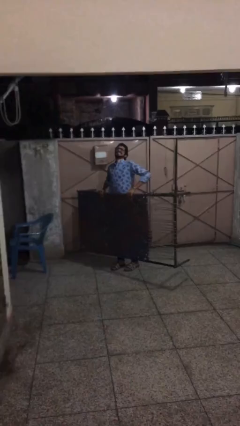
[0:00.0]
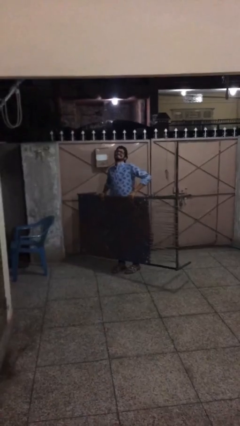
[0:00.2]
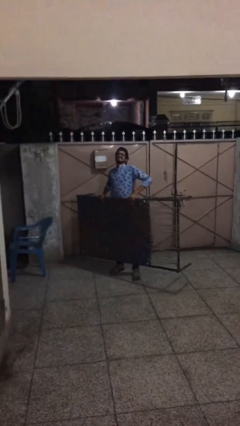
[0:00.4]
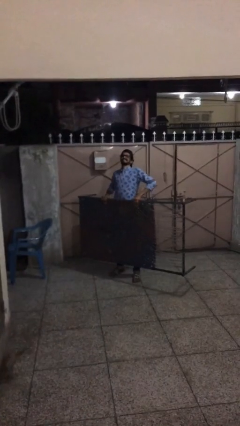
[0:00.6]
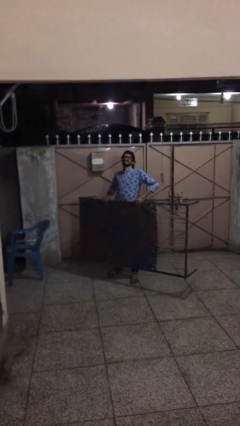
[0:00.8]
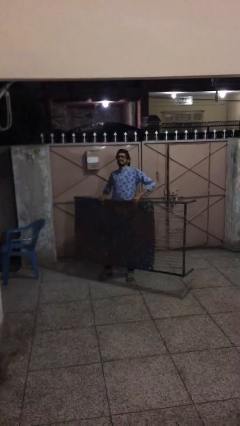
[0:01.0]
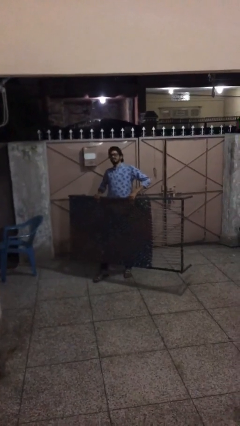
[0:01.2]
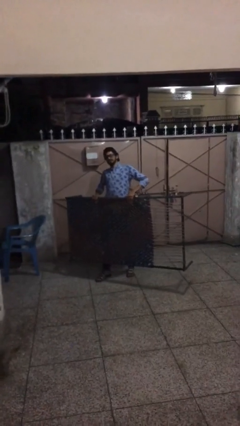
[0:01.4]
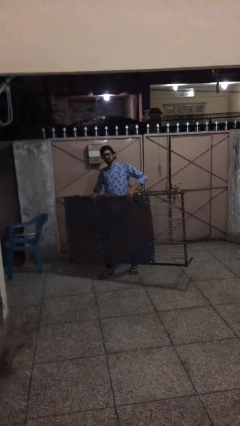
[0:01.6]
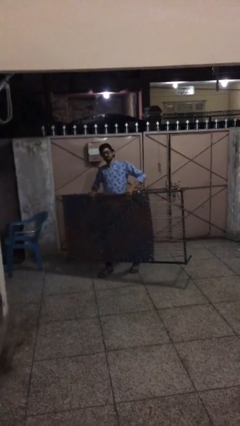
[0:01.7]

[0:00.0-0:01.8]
person carries heavy object

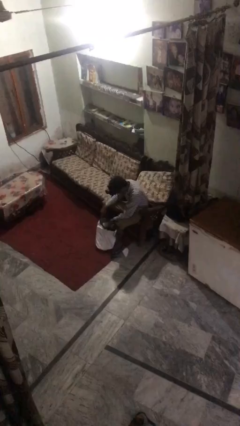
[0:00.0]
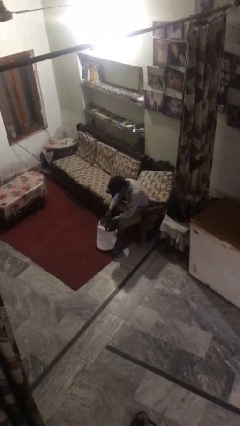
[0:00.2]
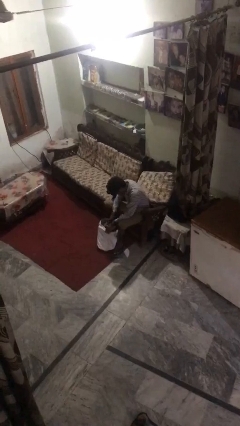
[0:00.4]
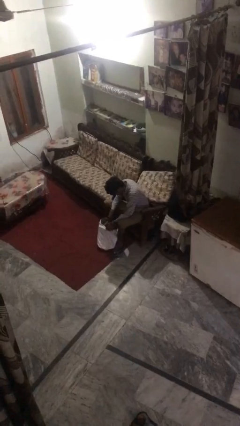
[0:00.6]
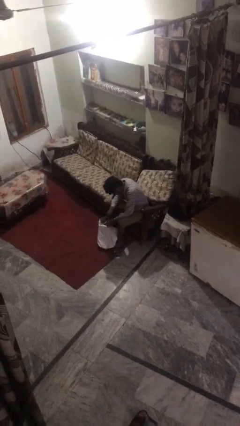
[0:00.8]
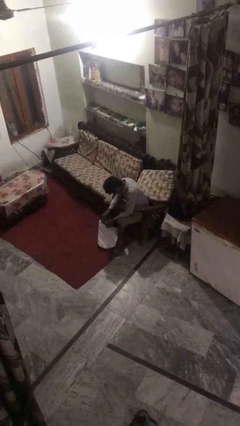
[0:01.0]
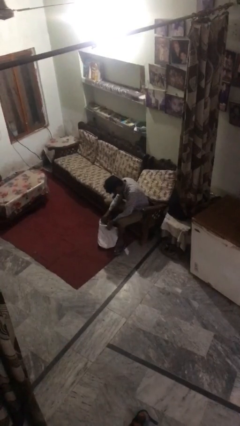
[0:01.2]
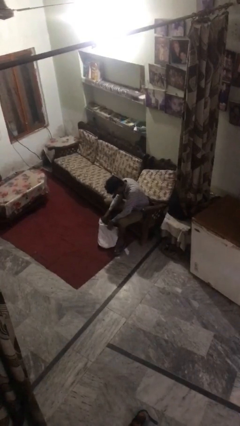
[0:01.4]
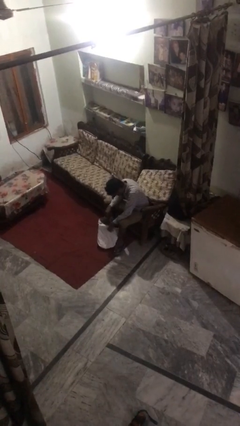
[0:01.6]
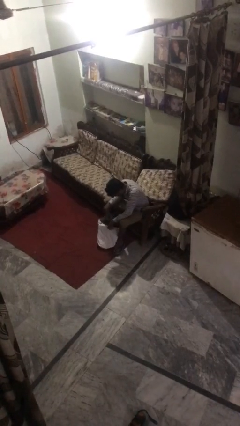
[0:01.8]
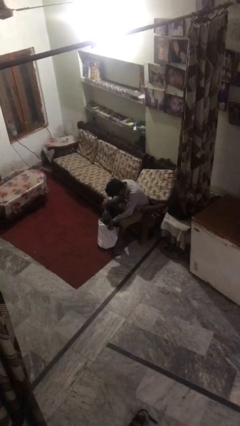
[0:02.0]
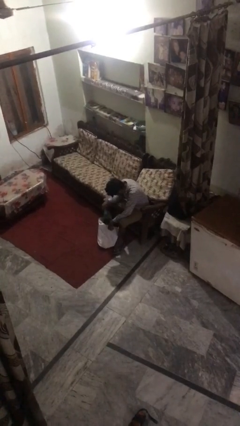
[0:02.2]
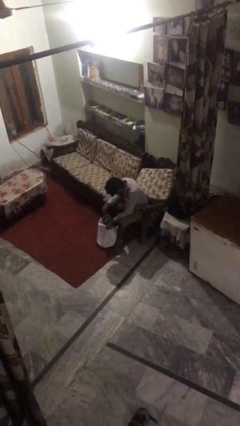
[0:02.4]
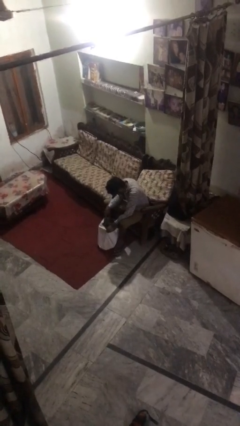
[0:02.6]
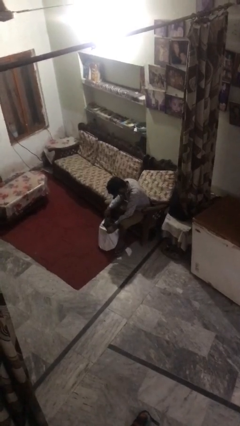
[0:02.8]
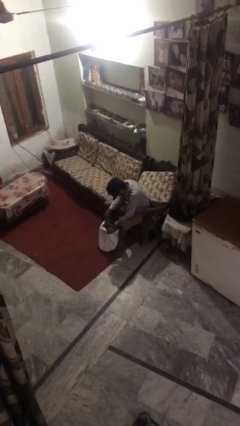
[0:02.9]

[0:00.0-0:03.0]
person searches under bed

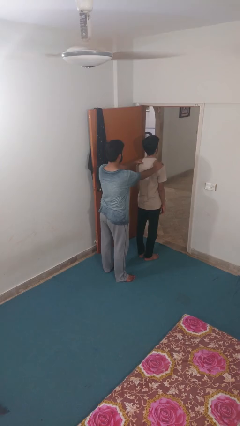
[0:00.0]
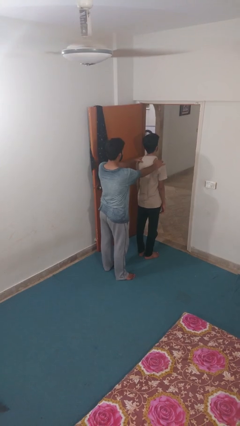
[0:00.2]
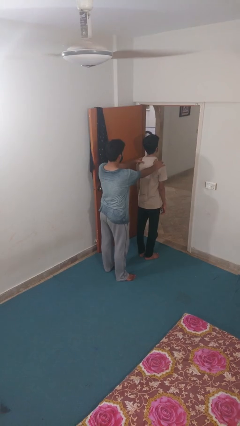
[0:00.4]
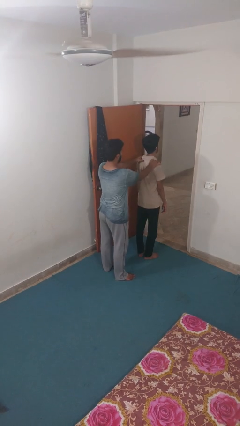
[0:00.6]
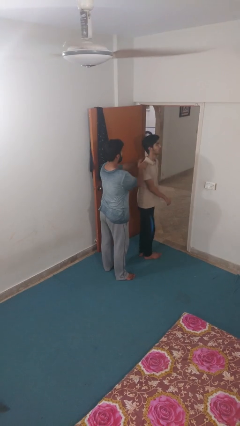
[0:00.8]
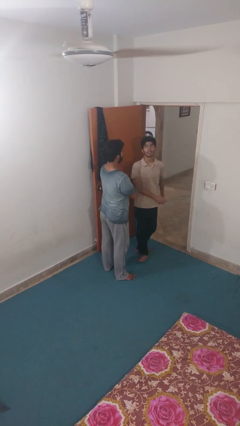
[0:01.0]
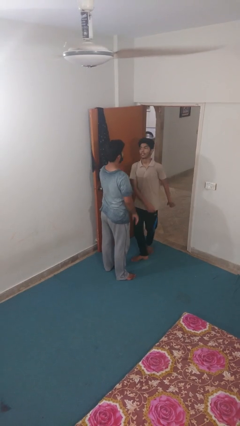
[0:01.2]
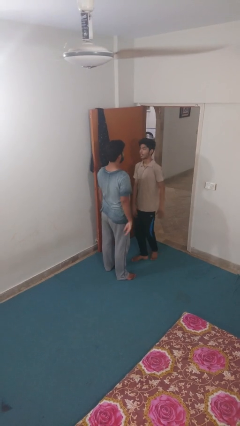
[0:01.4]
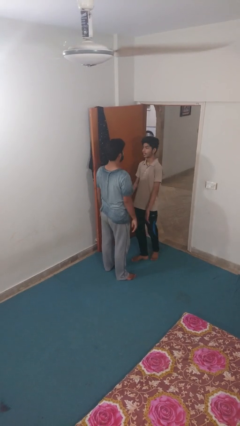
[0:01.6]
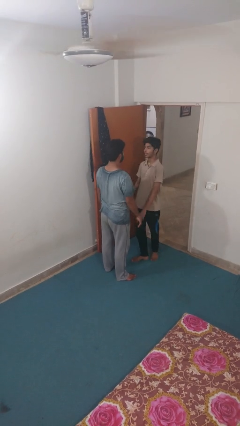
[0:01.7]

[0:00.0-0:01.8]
person spins person around

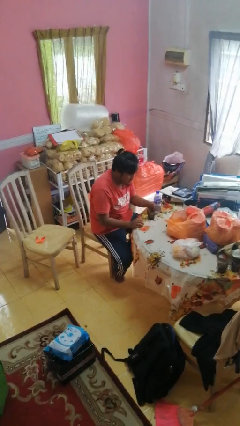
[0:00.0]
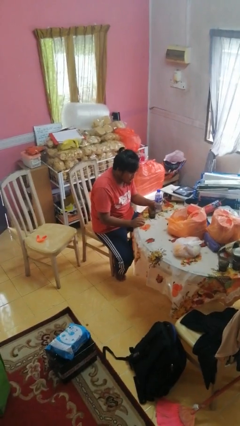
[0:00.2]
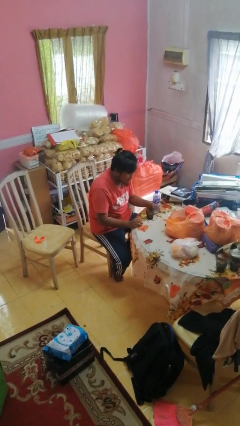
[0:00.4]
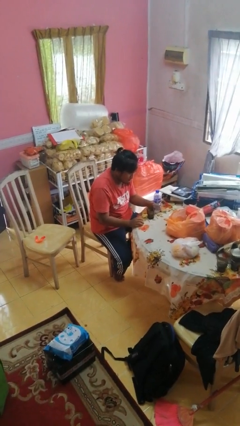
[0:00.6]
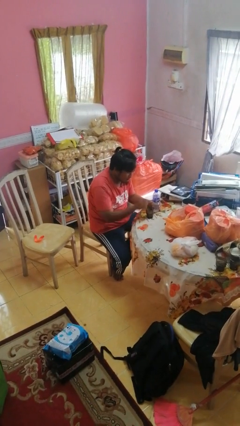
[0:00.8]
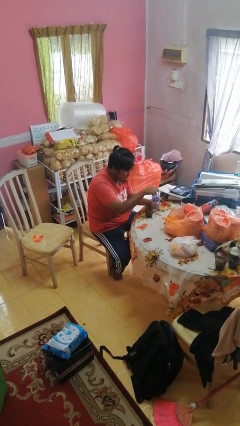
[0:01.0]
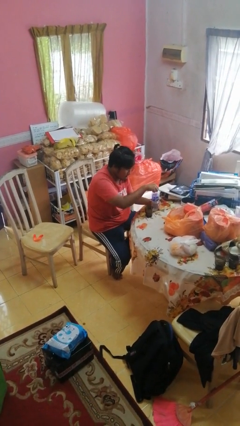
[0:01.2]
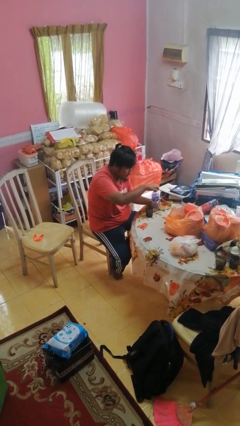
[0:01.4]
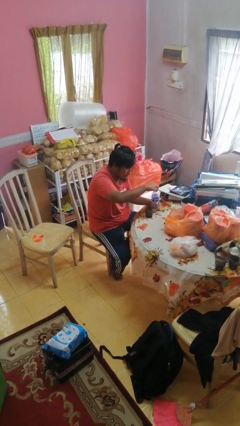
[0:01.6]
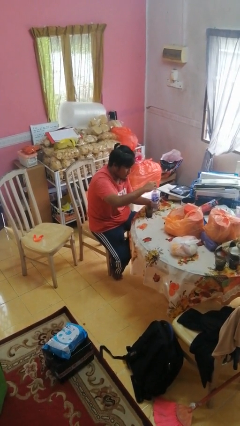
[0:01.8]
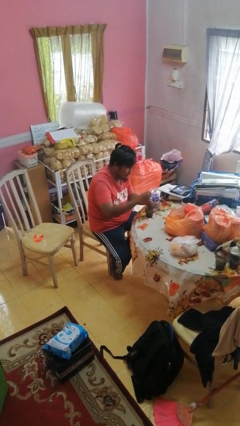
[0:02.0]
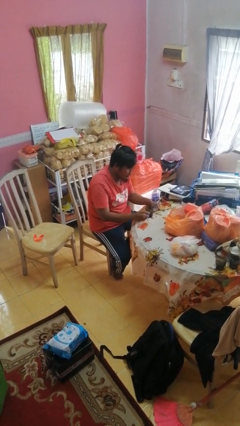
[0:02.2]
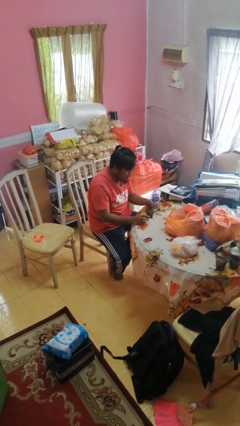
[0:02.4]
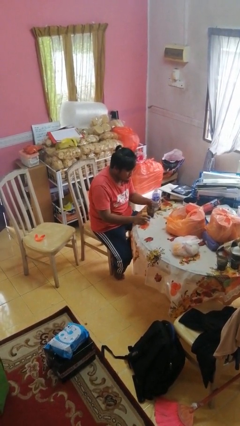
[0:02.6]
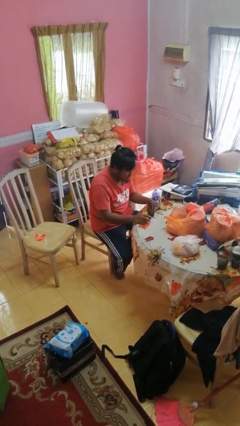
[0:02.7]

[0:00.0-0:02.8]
person unscrews lid from bottle

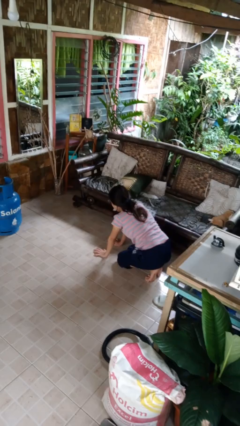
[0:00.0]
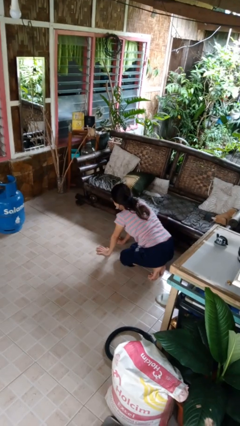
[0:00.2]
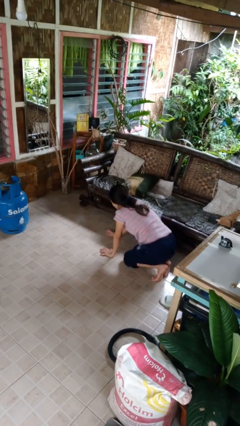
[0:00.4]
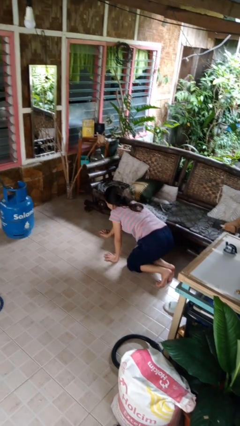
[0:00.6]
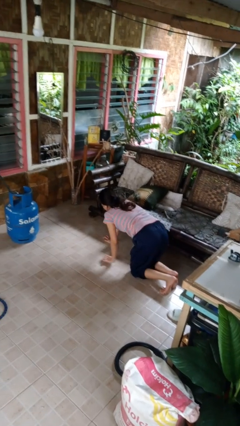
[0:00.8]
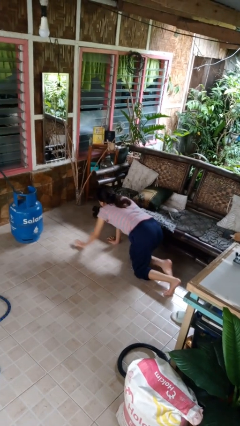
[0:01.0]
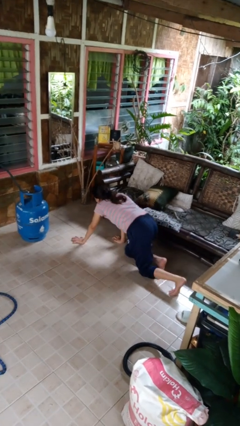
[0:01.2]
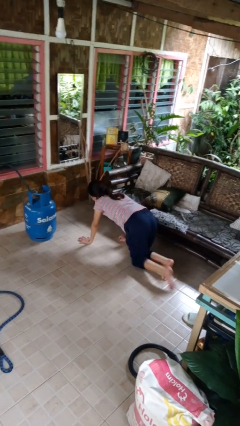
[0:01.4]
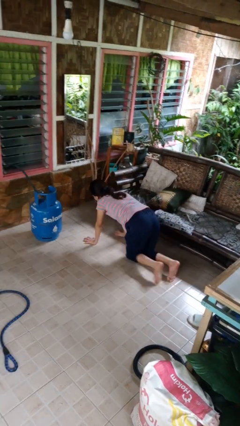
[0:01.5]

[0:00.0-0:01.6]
person crawls

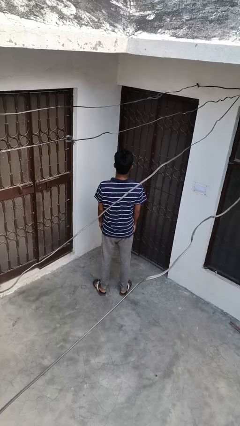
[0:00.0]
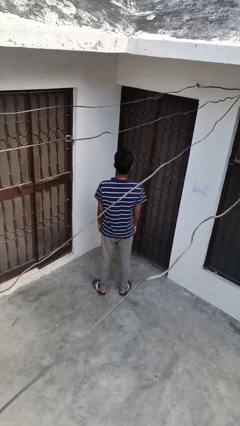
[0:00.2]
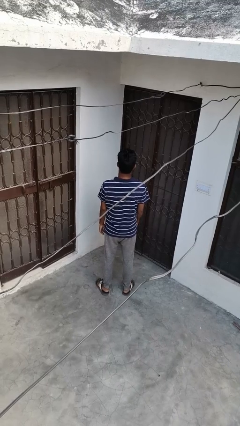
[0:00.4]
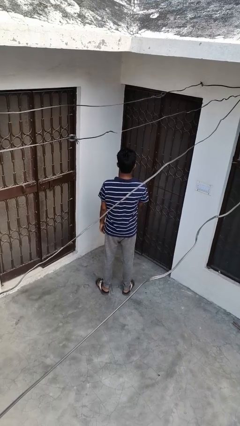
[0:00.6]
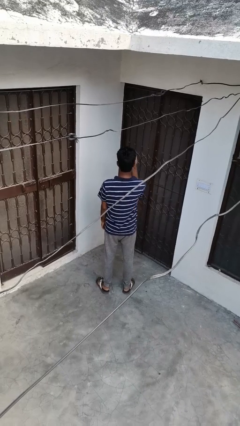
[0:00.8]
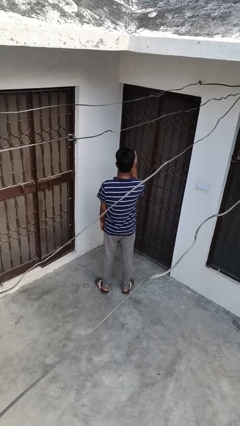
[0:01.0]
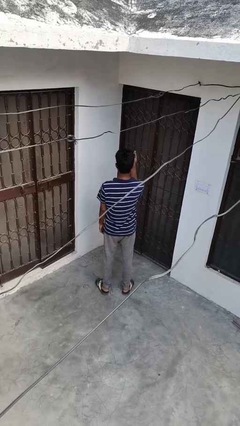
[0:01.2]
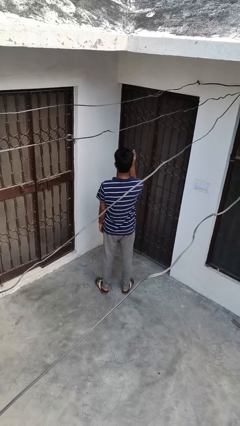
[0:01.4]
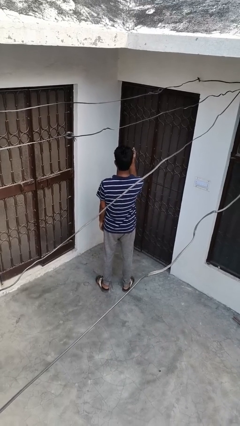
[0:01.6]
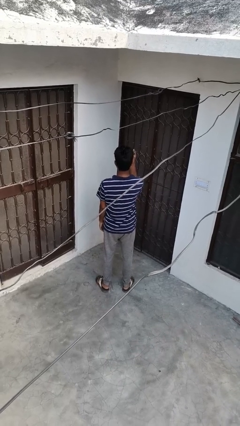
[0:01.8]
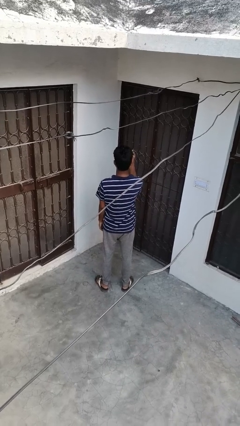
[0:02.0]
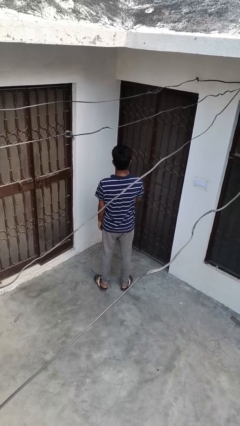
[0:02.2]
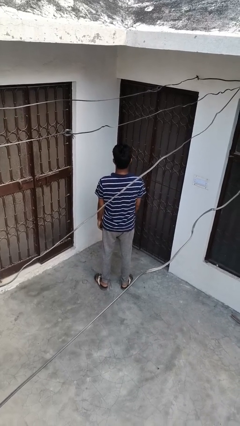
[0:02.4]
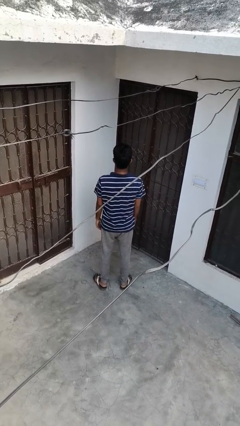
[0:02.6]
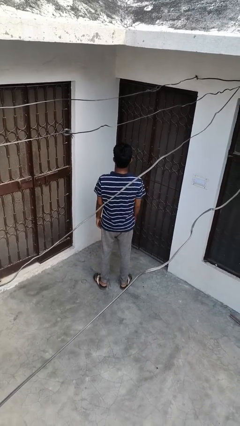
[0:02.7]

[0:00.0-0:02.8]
person gestures number four

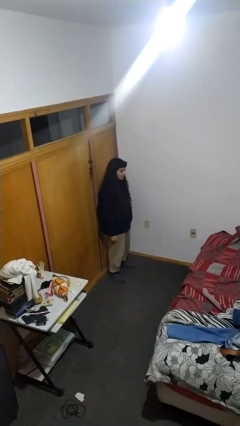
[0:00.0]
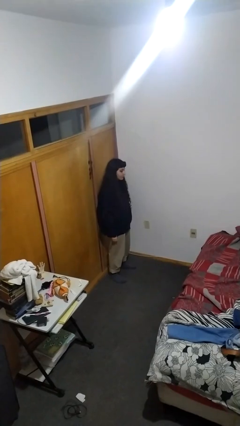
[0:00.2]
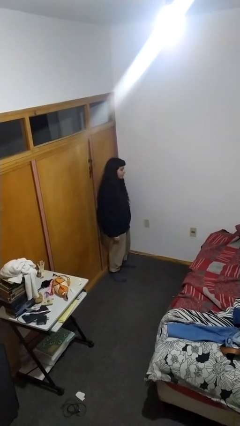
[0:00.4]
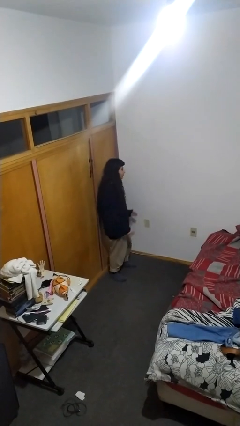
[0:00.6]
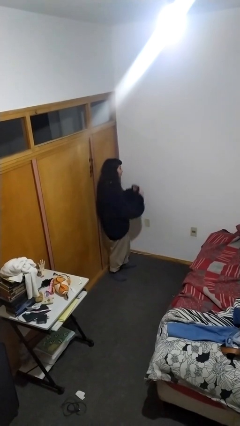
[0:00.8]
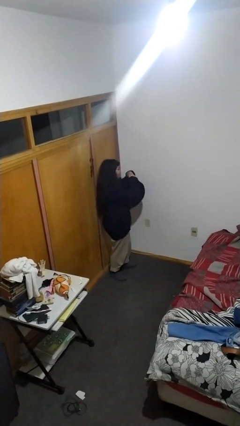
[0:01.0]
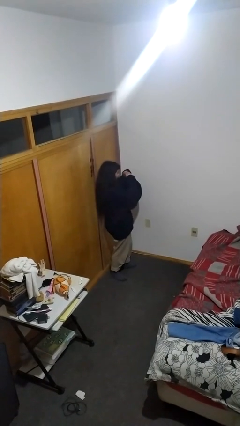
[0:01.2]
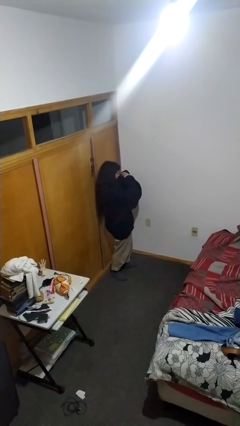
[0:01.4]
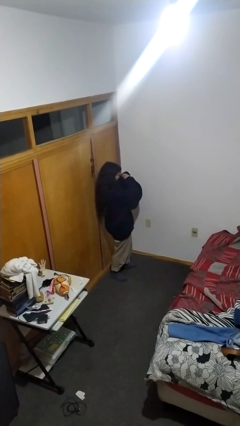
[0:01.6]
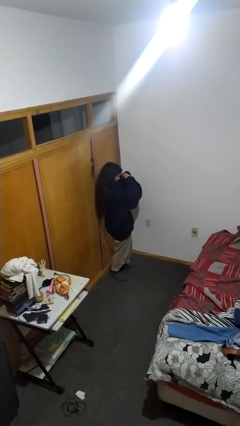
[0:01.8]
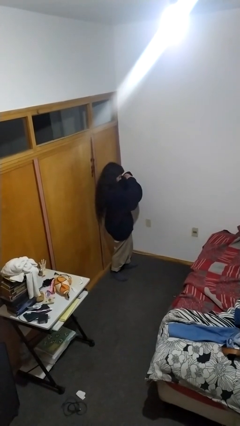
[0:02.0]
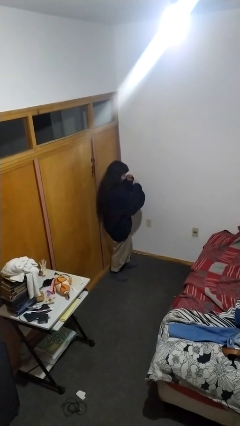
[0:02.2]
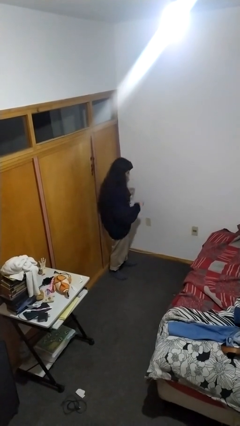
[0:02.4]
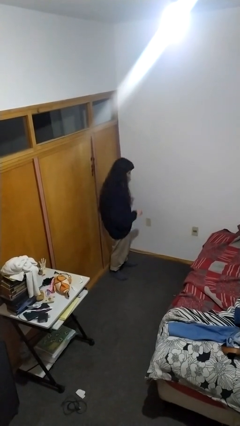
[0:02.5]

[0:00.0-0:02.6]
person gestures heart

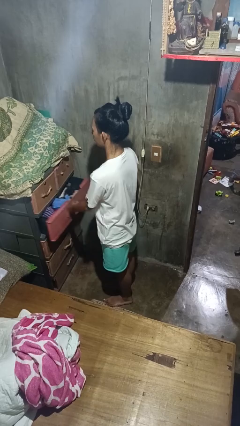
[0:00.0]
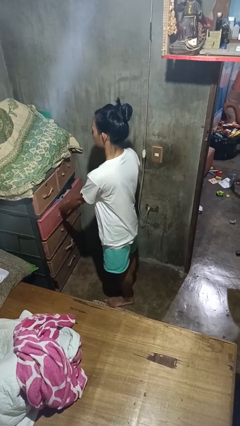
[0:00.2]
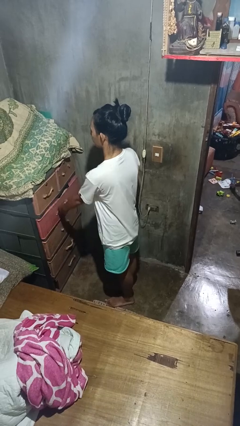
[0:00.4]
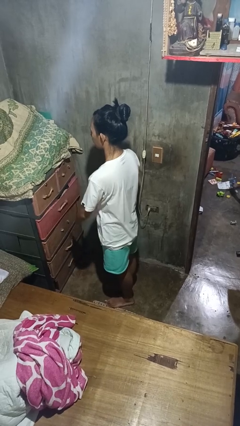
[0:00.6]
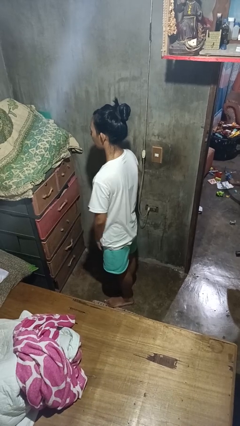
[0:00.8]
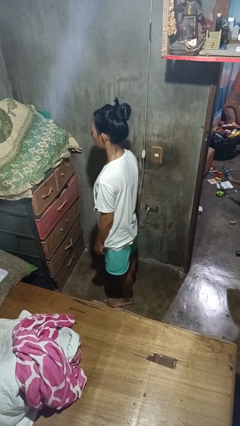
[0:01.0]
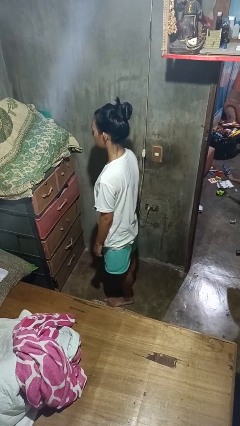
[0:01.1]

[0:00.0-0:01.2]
person closes dresser drawer
